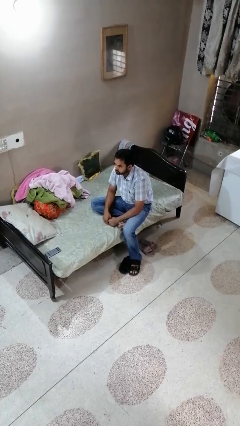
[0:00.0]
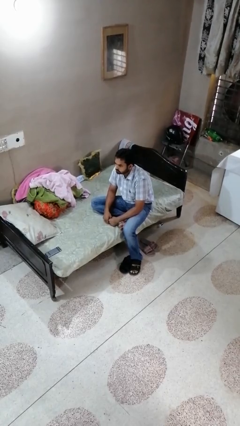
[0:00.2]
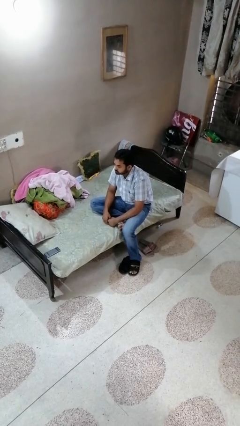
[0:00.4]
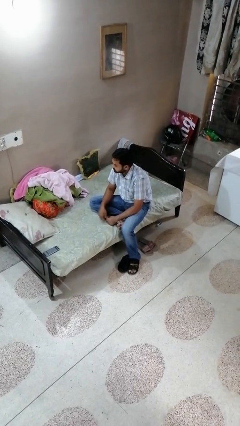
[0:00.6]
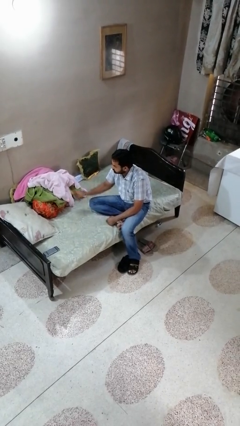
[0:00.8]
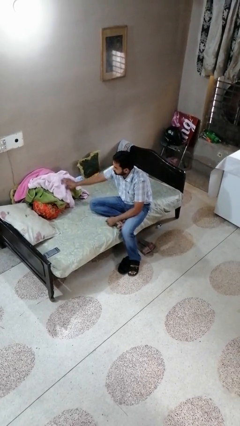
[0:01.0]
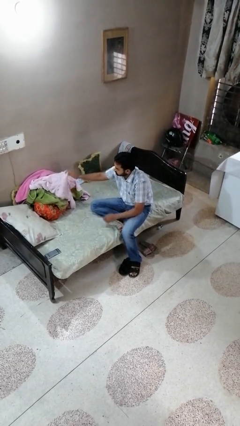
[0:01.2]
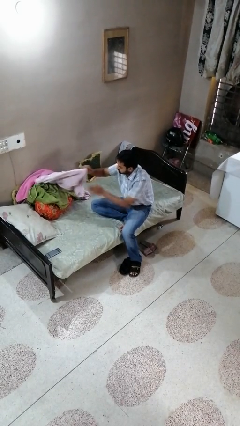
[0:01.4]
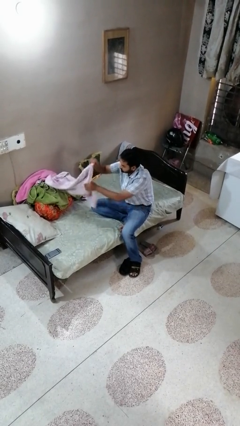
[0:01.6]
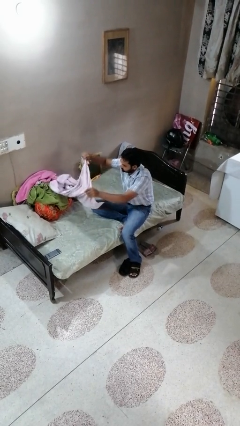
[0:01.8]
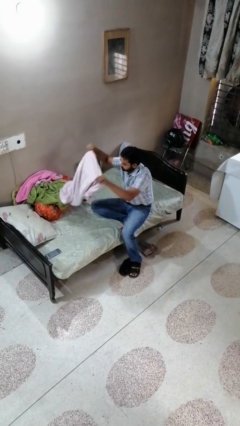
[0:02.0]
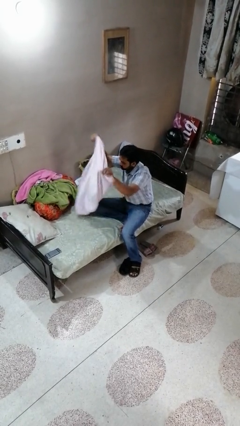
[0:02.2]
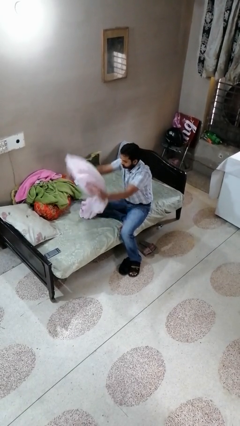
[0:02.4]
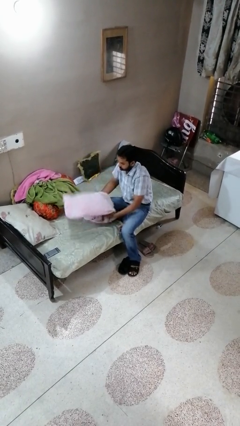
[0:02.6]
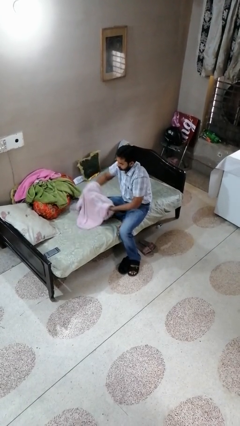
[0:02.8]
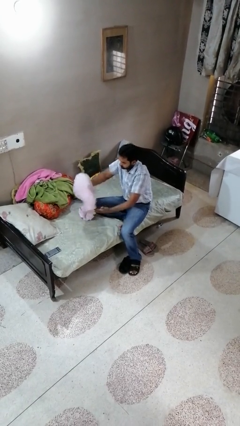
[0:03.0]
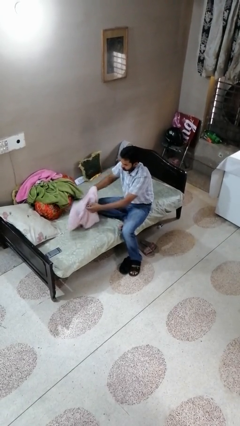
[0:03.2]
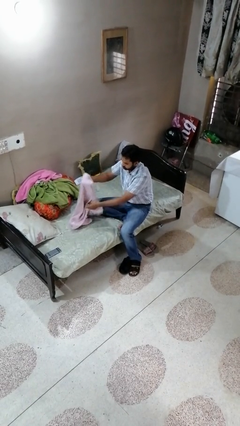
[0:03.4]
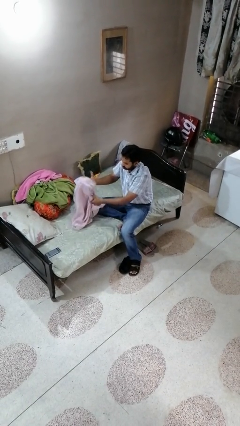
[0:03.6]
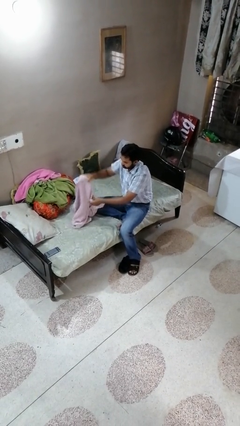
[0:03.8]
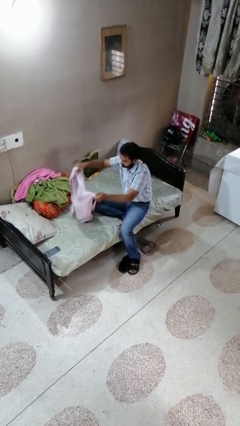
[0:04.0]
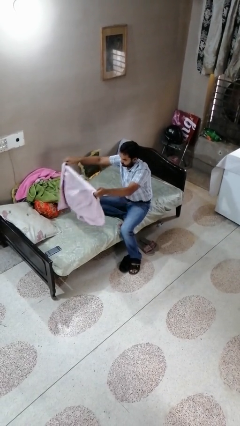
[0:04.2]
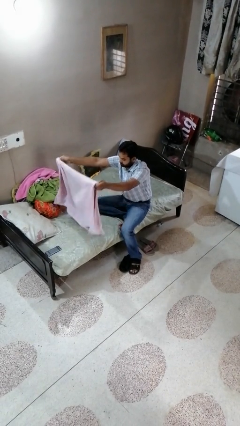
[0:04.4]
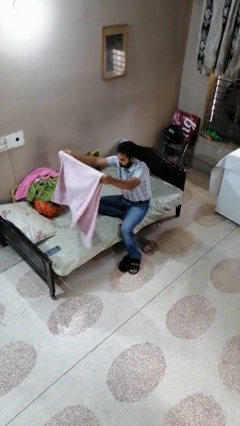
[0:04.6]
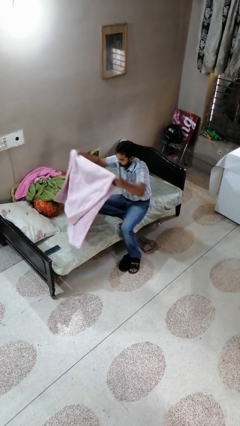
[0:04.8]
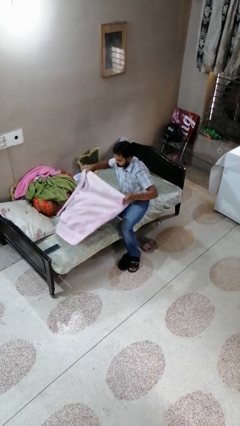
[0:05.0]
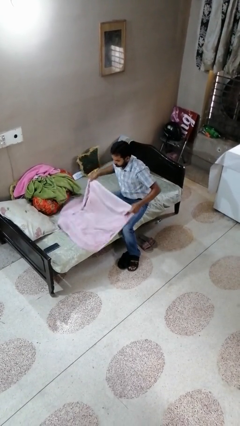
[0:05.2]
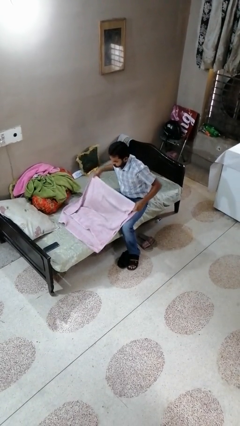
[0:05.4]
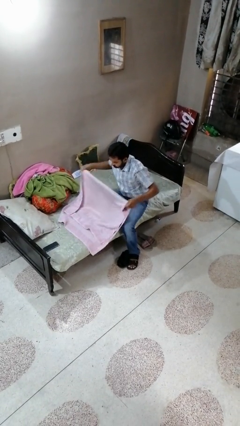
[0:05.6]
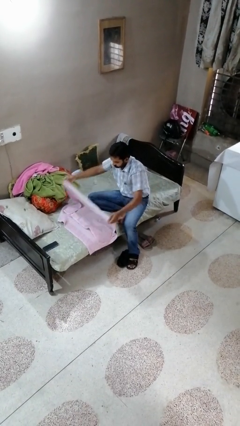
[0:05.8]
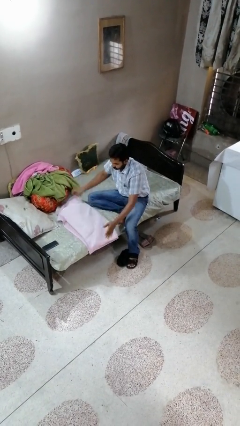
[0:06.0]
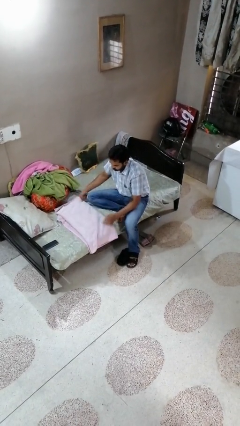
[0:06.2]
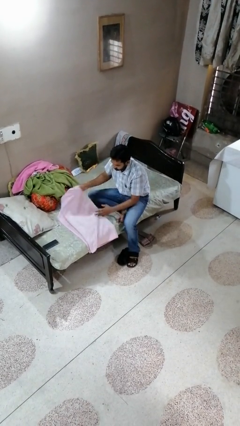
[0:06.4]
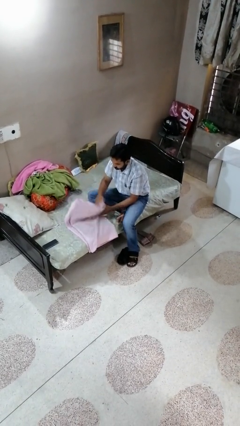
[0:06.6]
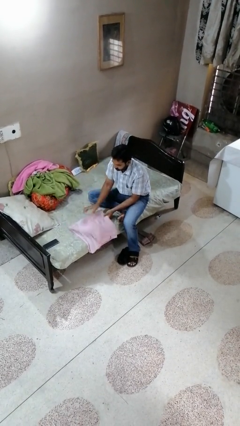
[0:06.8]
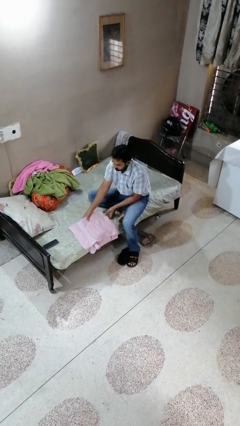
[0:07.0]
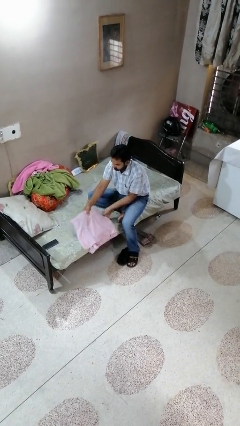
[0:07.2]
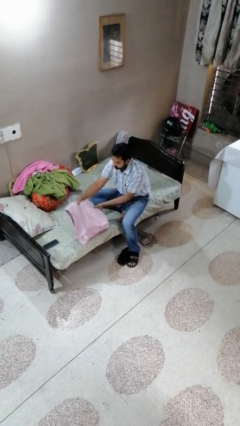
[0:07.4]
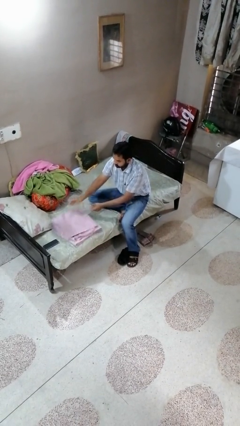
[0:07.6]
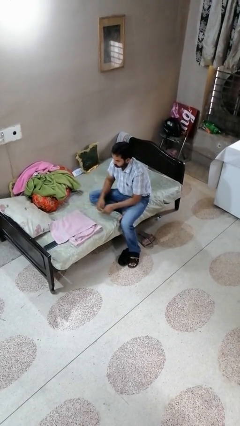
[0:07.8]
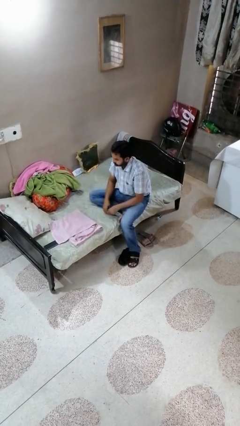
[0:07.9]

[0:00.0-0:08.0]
person folds towel

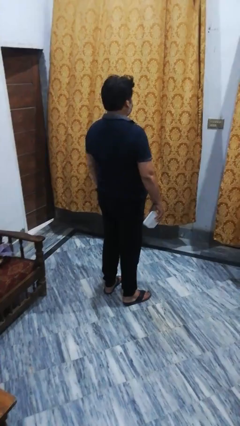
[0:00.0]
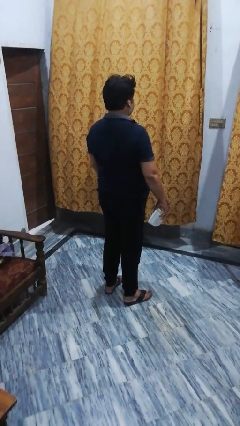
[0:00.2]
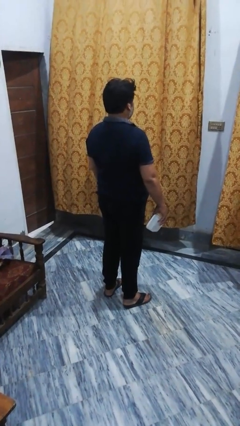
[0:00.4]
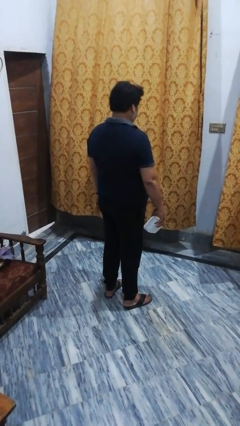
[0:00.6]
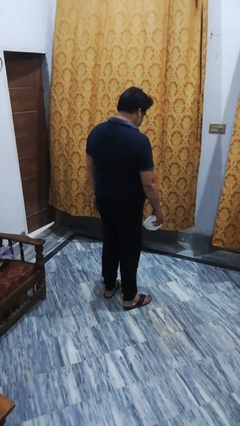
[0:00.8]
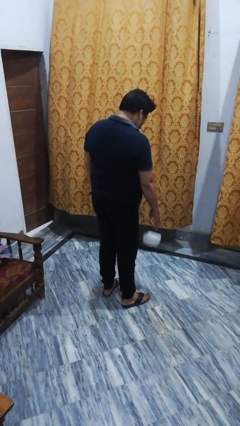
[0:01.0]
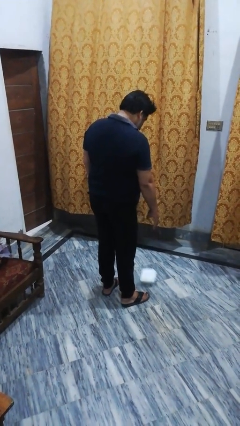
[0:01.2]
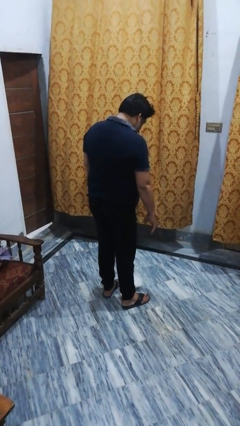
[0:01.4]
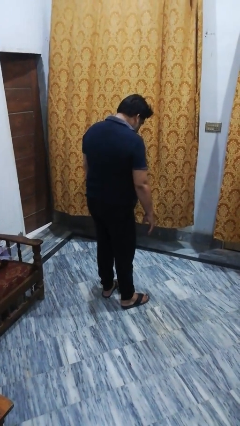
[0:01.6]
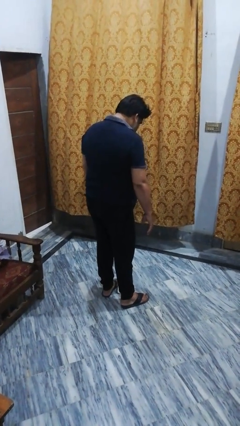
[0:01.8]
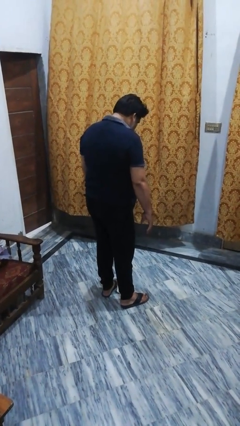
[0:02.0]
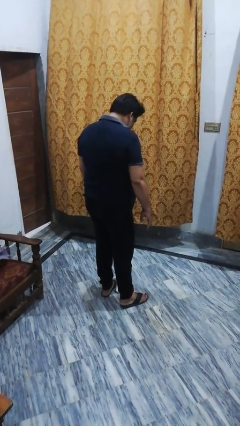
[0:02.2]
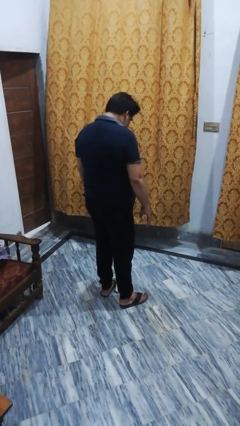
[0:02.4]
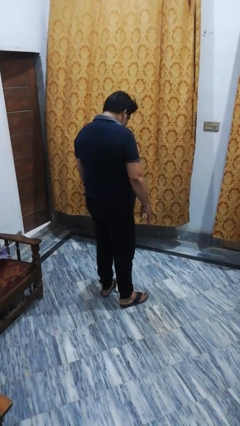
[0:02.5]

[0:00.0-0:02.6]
person throws object to ground

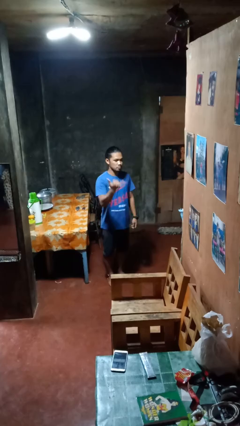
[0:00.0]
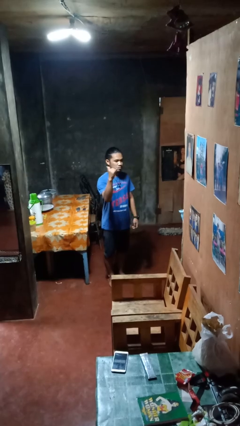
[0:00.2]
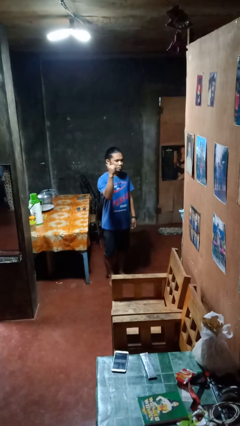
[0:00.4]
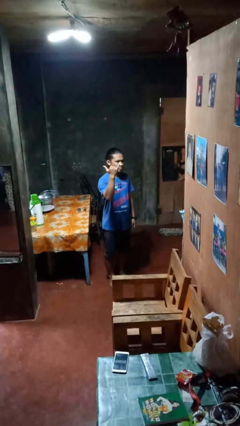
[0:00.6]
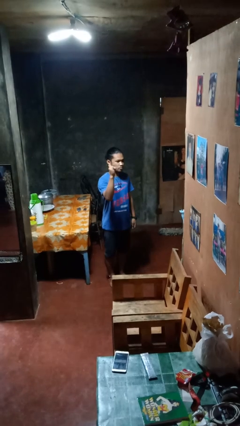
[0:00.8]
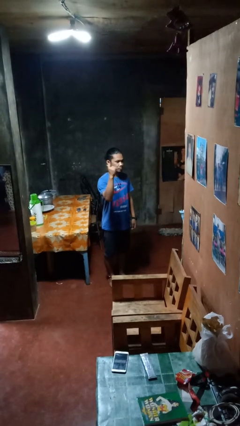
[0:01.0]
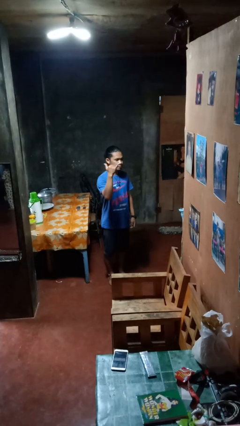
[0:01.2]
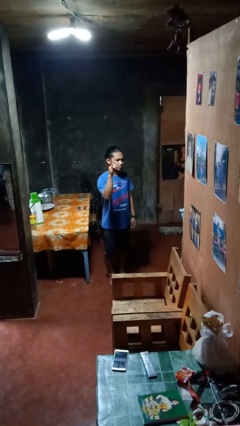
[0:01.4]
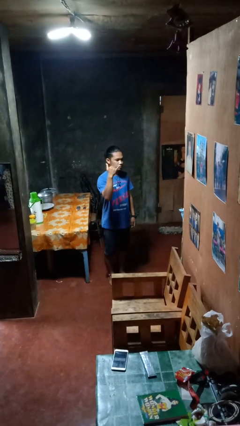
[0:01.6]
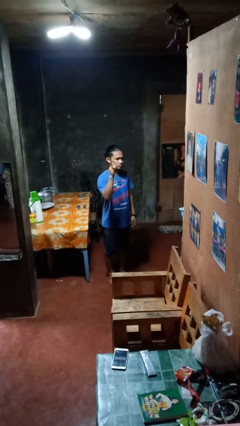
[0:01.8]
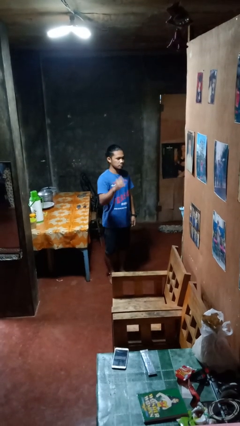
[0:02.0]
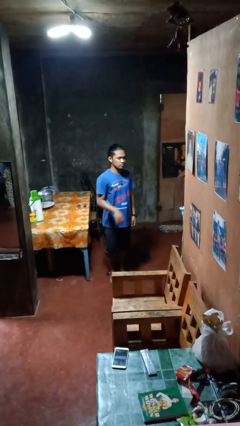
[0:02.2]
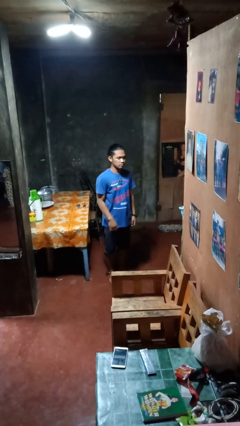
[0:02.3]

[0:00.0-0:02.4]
person gestures hang loose

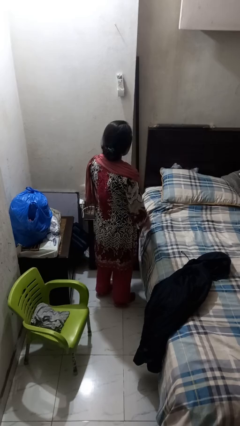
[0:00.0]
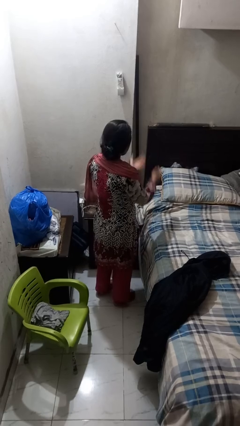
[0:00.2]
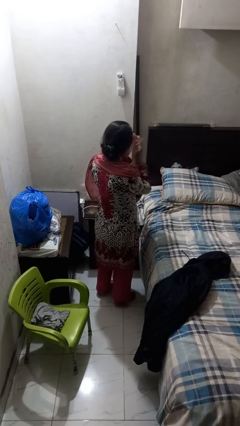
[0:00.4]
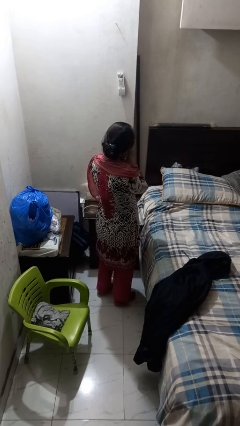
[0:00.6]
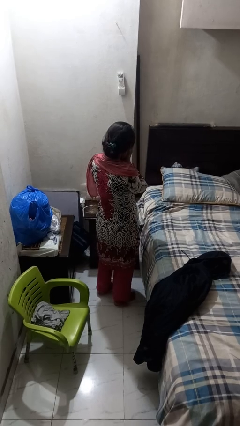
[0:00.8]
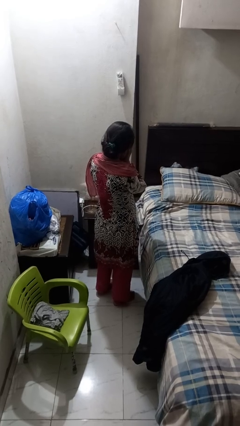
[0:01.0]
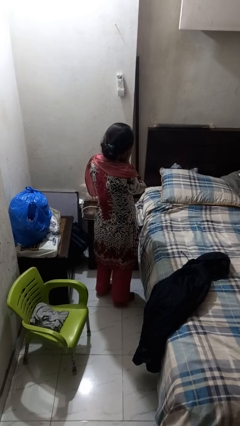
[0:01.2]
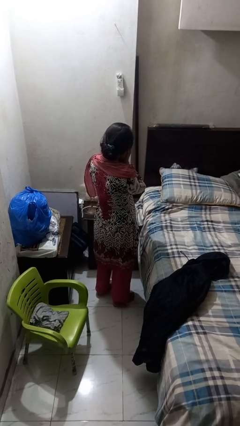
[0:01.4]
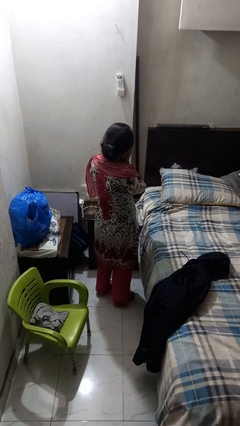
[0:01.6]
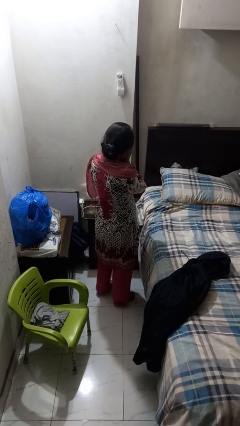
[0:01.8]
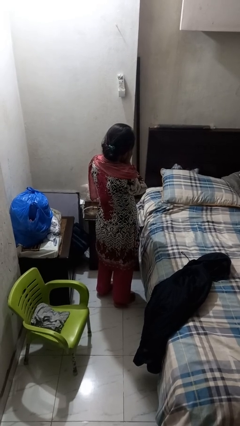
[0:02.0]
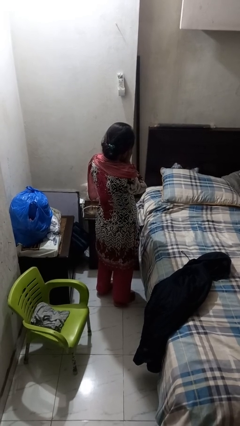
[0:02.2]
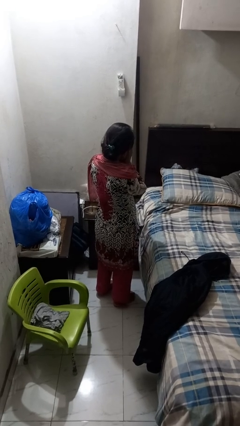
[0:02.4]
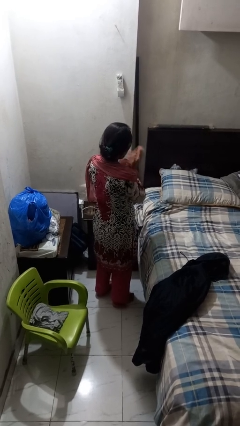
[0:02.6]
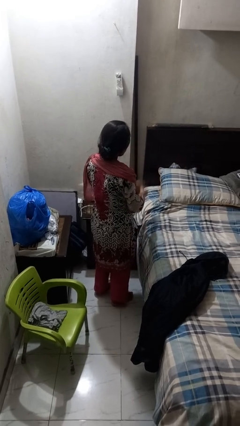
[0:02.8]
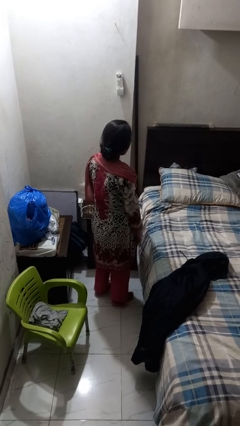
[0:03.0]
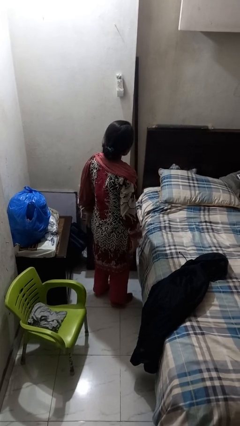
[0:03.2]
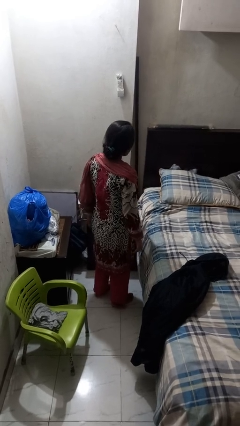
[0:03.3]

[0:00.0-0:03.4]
person covers face with hands

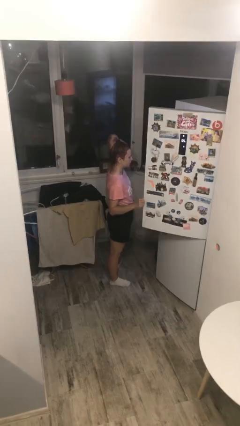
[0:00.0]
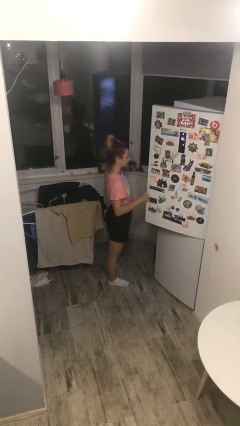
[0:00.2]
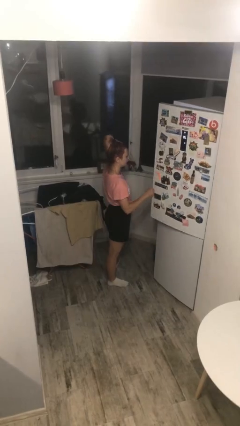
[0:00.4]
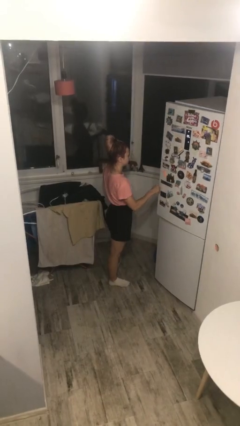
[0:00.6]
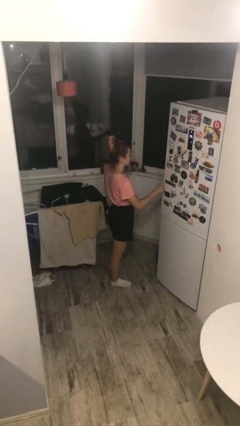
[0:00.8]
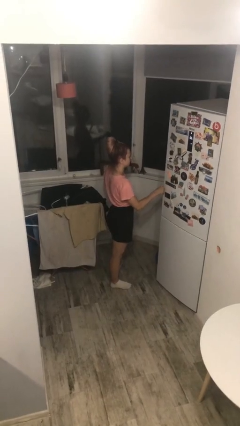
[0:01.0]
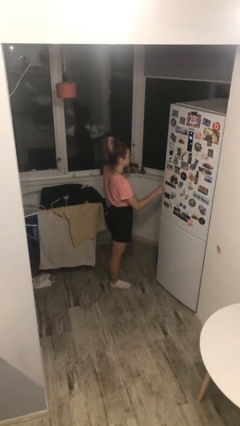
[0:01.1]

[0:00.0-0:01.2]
person closes refrigerator
